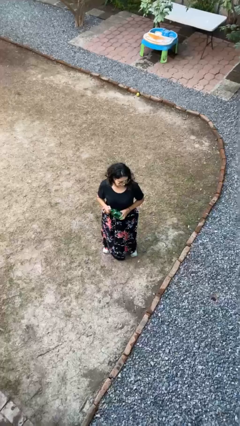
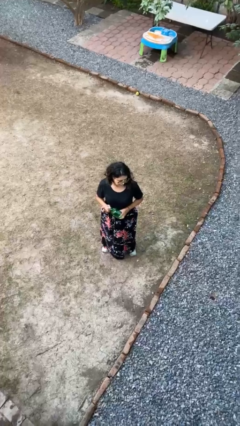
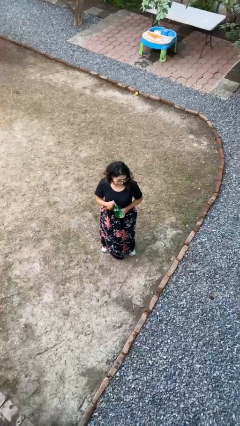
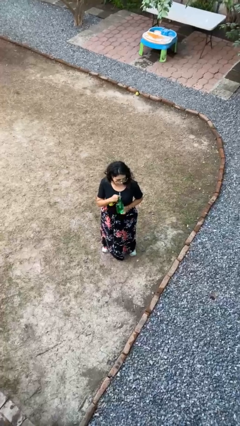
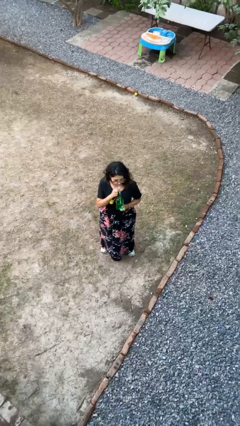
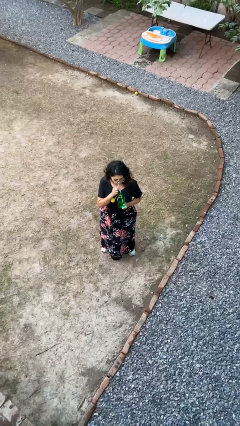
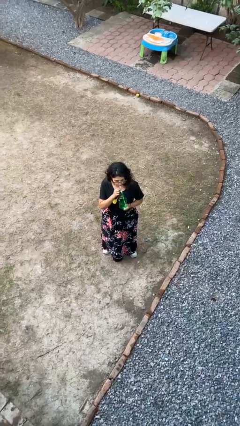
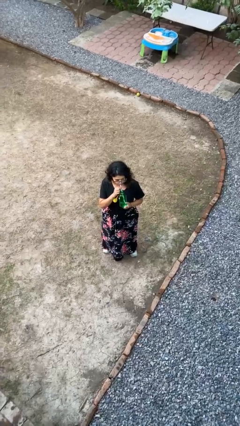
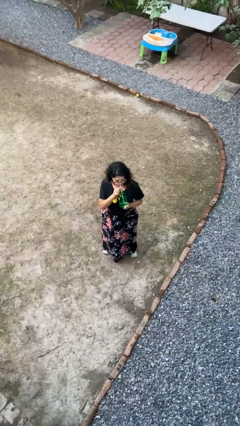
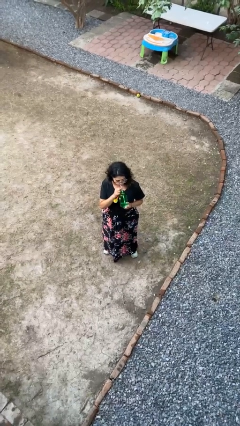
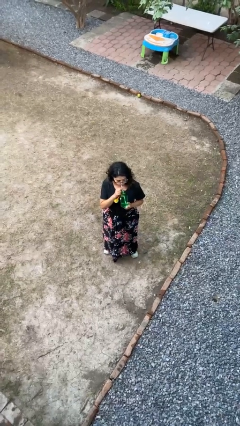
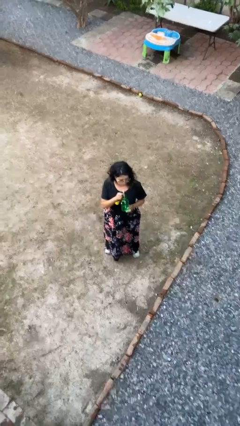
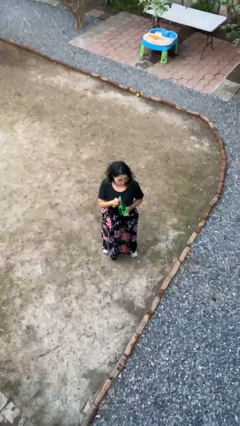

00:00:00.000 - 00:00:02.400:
person drinks from straw

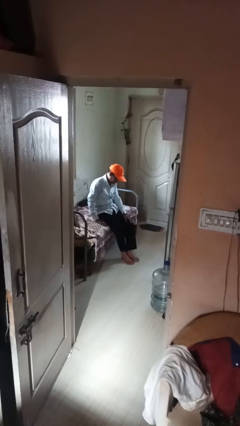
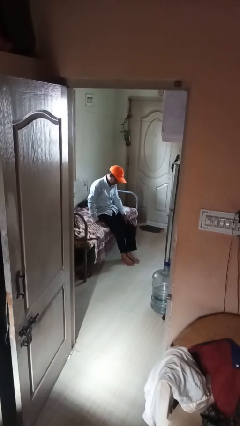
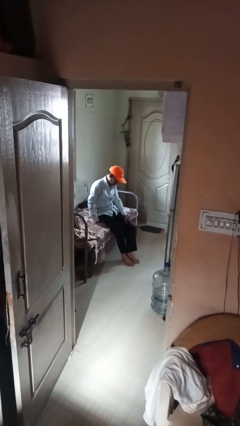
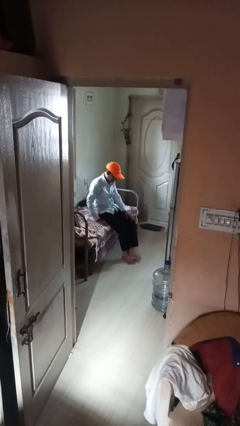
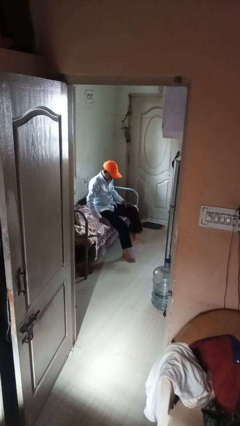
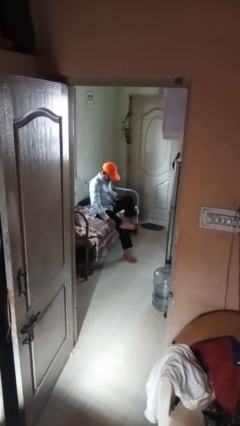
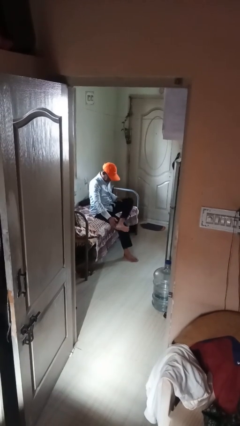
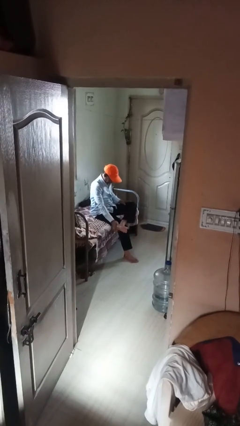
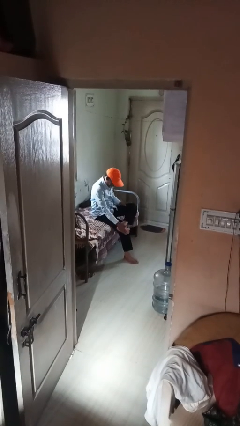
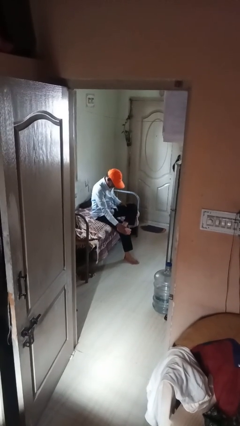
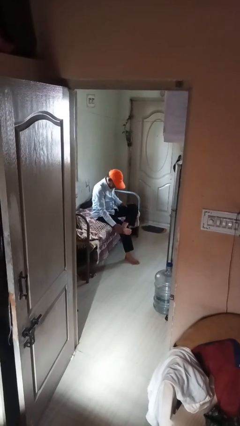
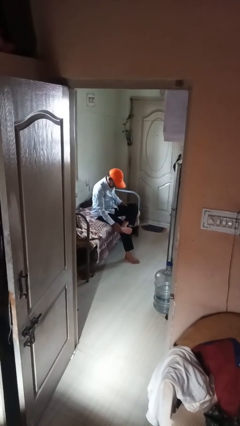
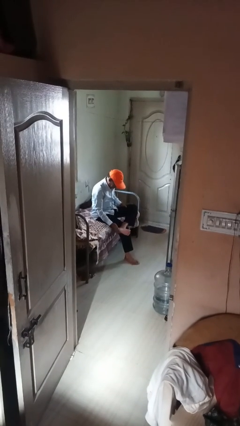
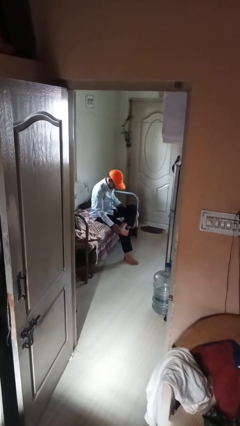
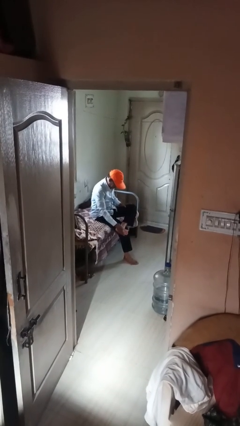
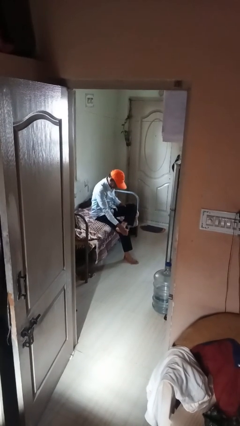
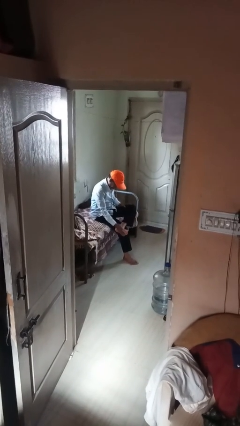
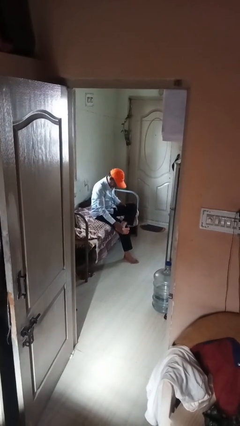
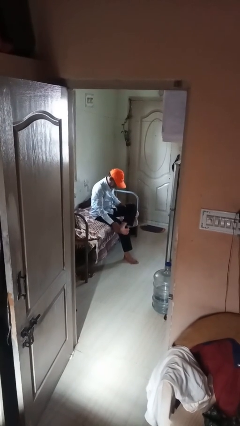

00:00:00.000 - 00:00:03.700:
person rubs foot

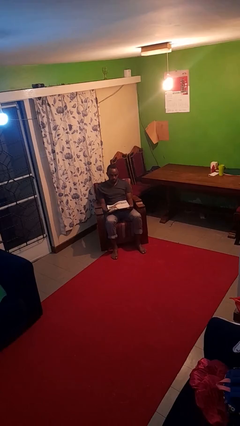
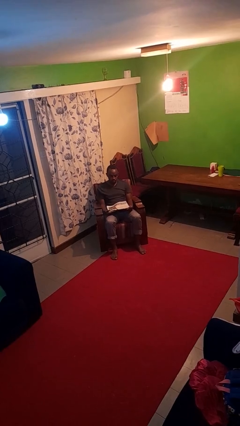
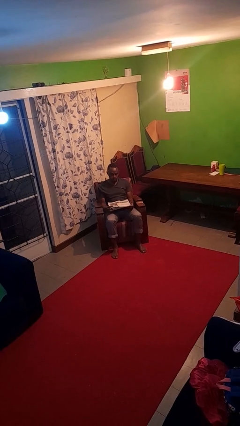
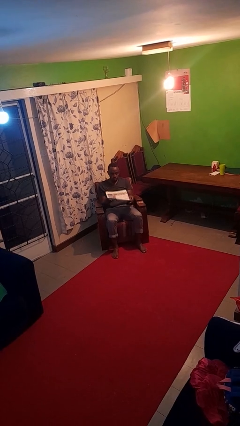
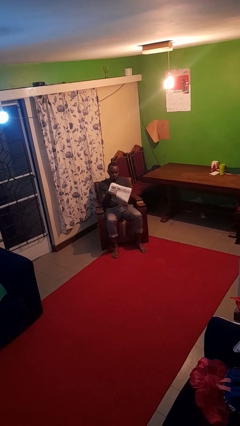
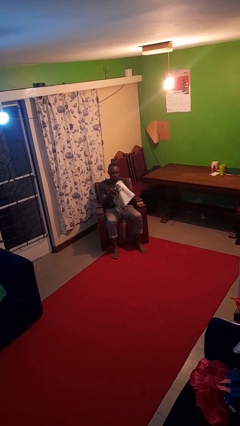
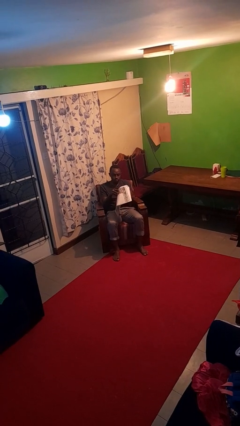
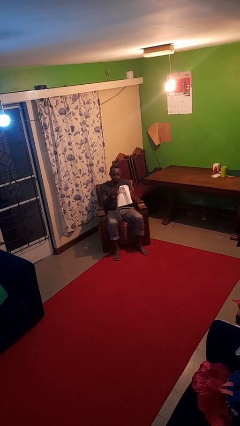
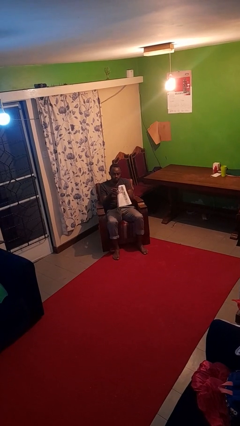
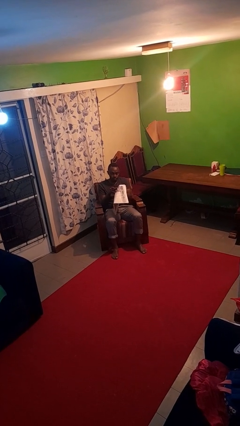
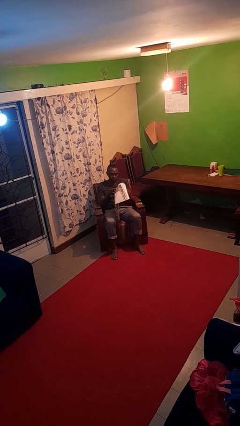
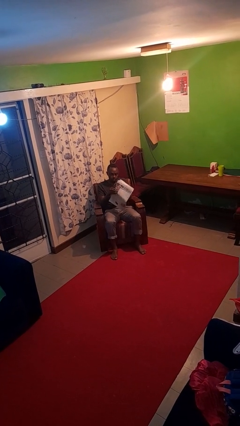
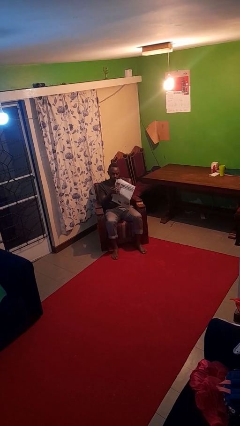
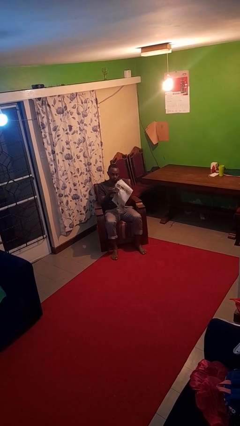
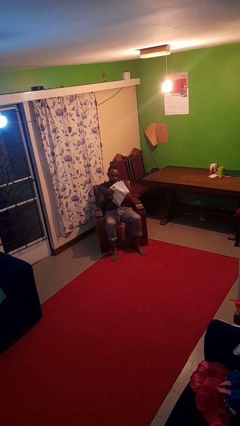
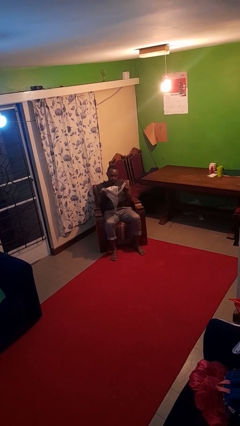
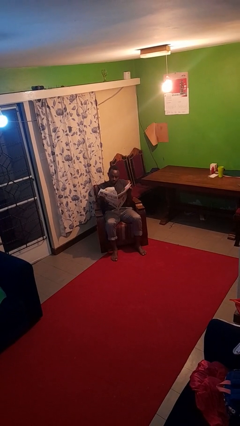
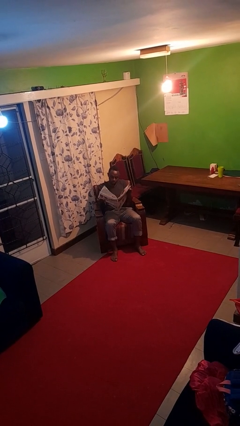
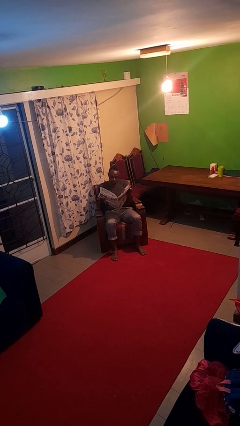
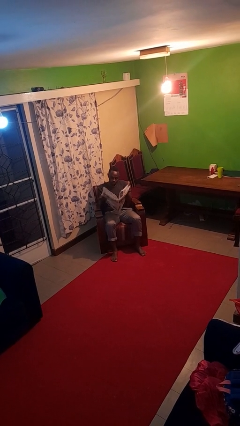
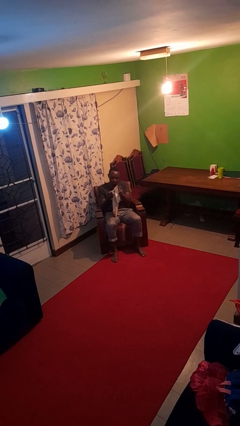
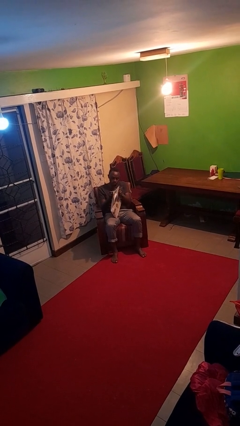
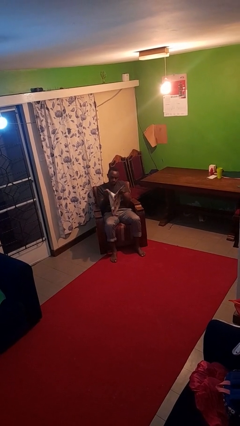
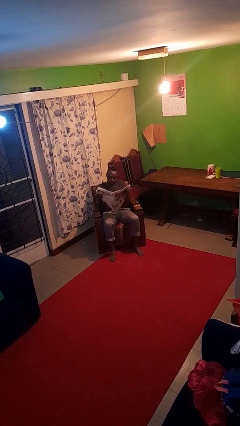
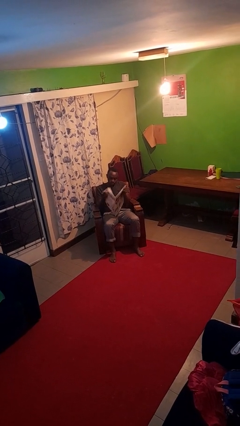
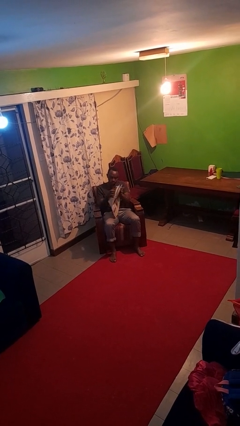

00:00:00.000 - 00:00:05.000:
person reads newspaper

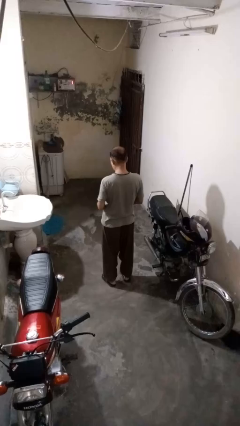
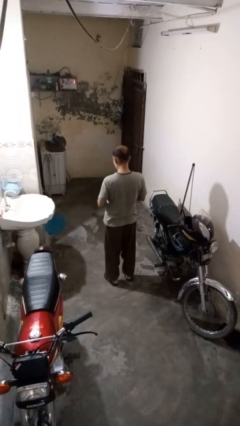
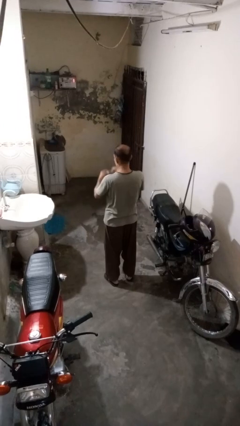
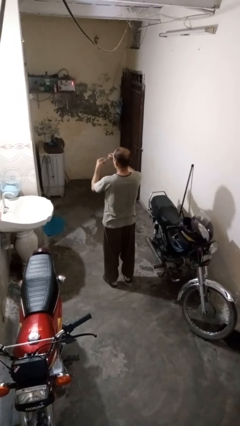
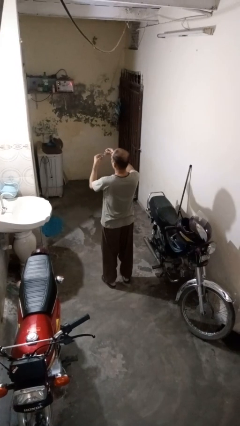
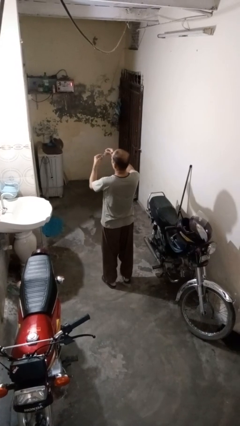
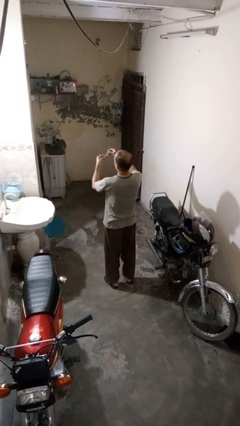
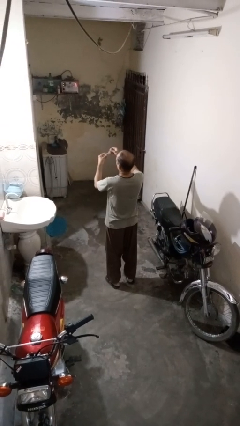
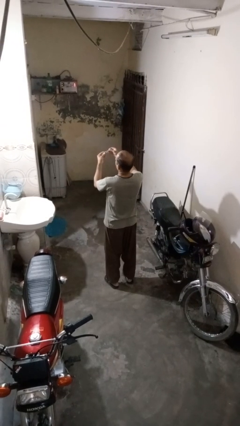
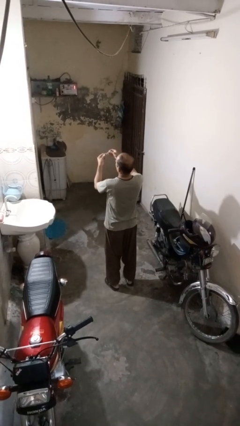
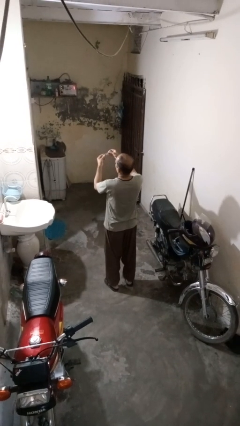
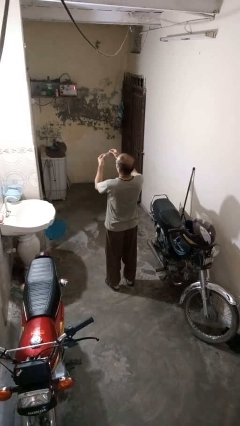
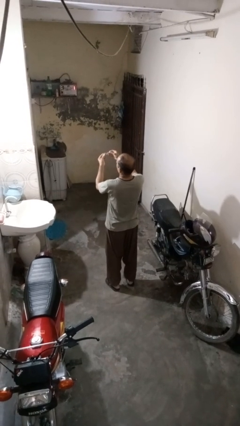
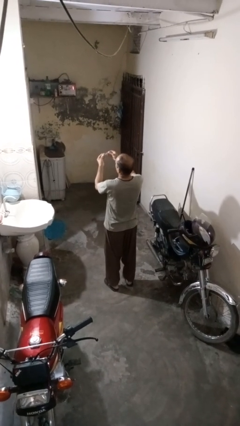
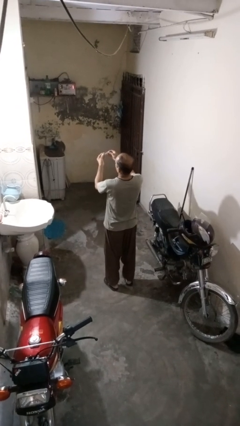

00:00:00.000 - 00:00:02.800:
person clips fingernails

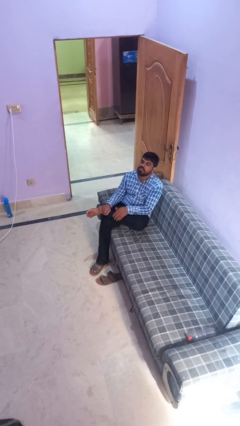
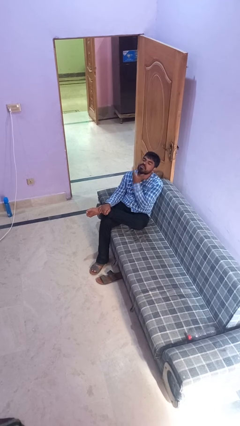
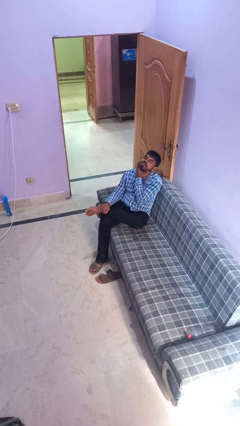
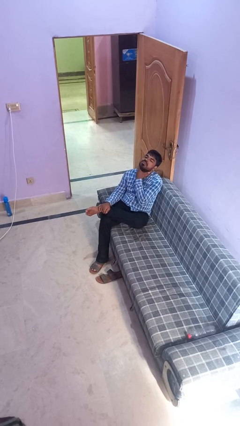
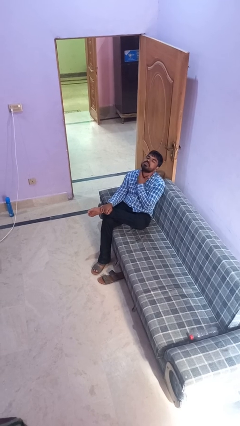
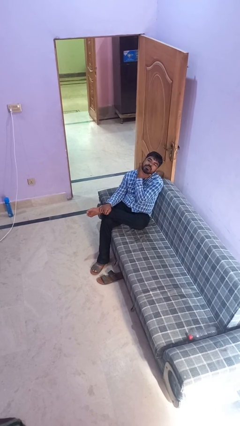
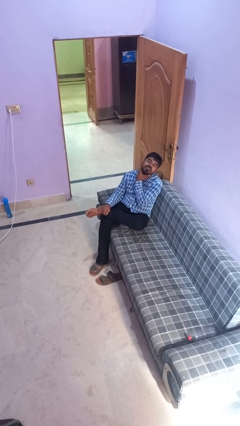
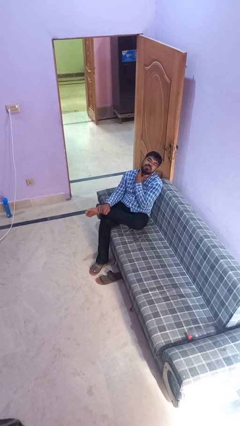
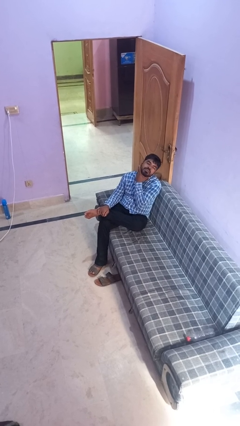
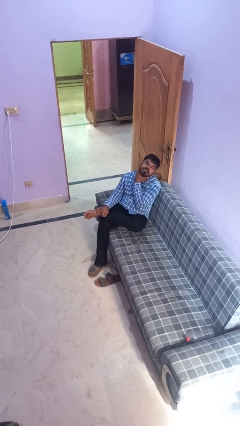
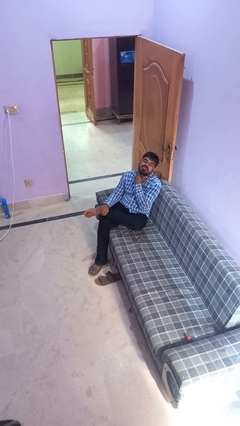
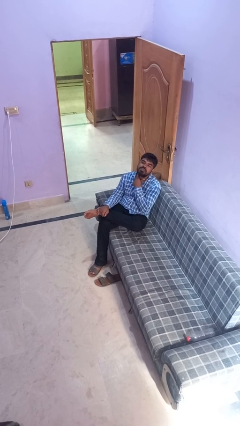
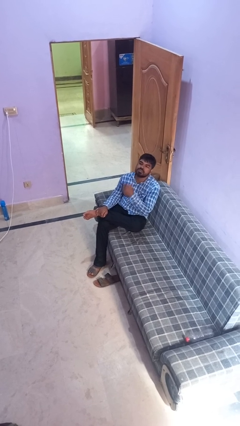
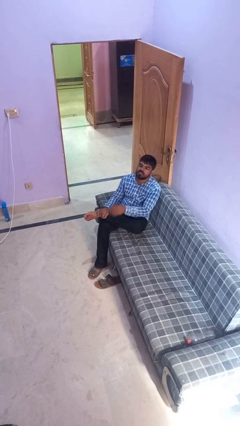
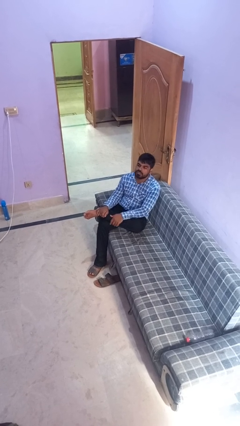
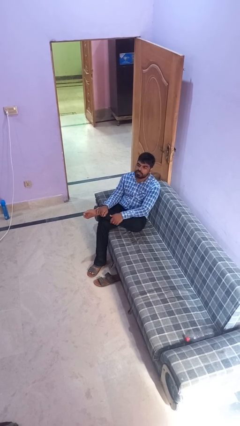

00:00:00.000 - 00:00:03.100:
person rubs neck

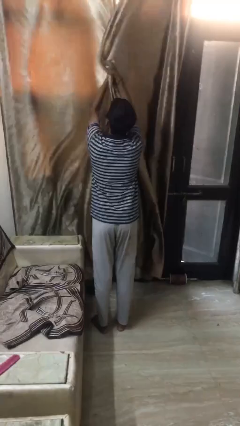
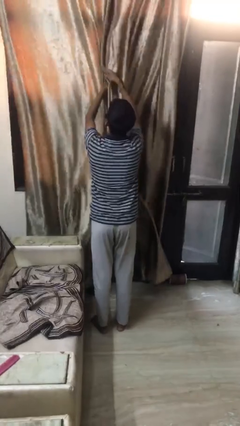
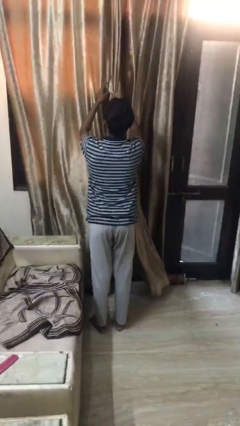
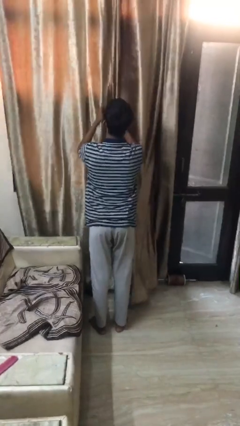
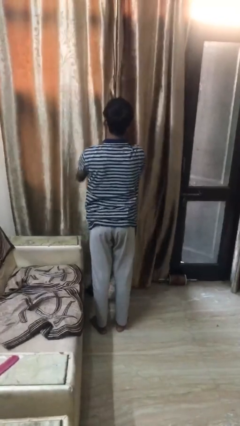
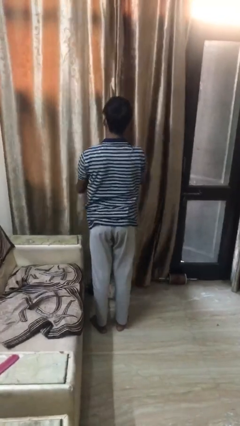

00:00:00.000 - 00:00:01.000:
person closes curtains
